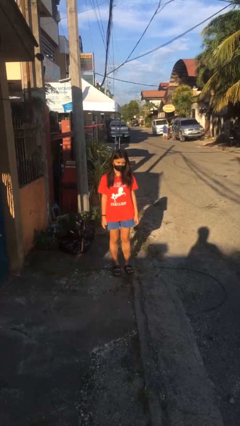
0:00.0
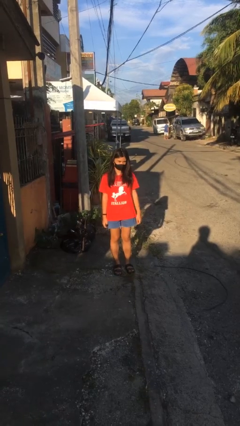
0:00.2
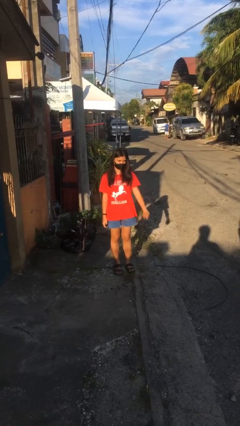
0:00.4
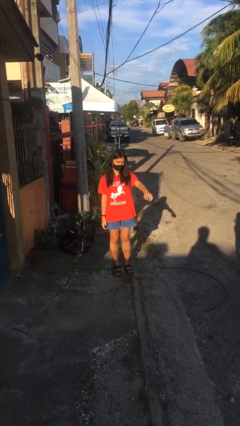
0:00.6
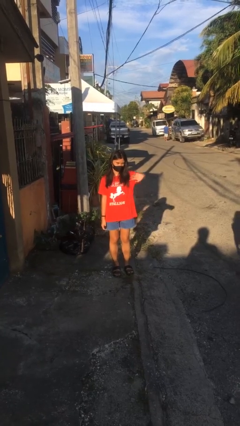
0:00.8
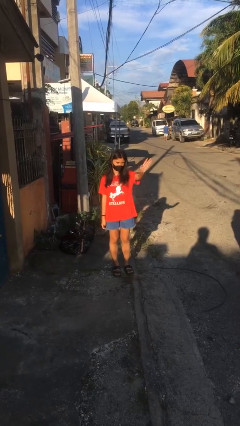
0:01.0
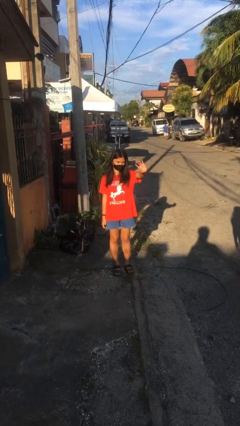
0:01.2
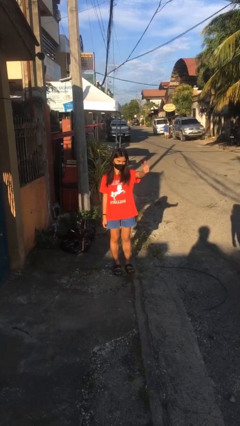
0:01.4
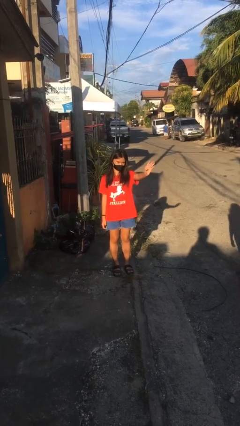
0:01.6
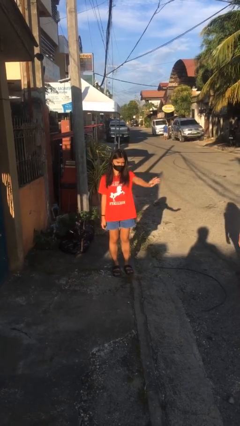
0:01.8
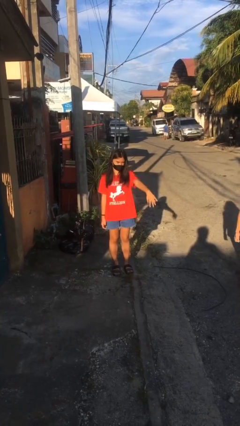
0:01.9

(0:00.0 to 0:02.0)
person waves at person

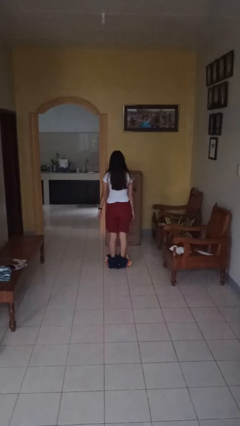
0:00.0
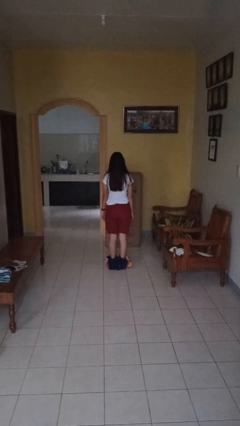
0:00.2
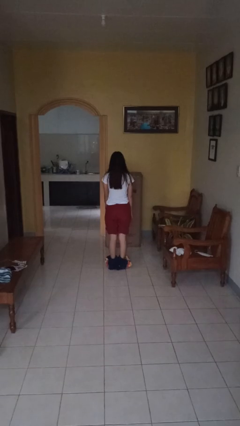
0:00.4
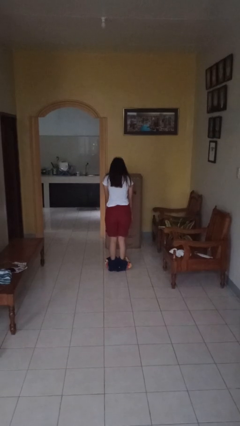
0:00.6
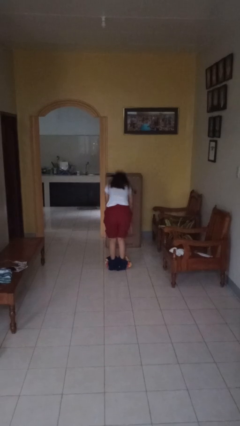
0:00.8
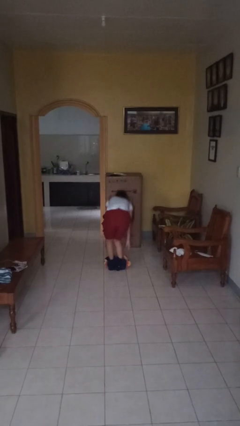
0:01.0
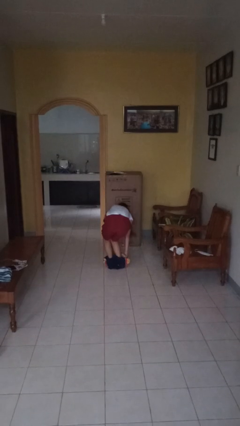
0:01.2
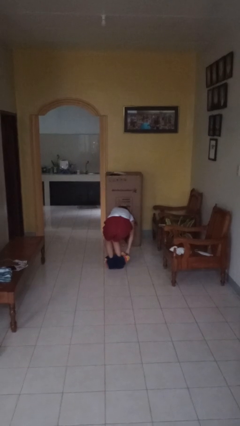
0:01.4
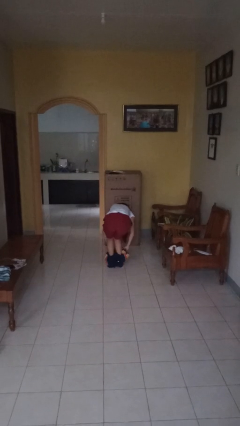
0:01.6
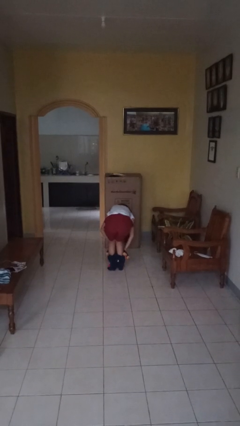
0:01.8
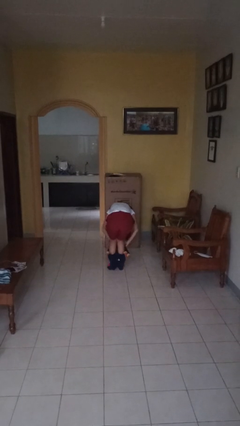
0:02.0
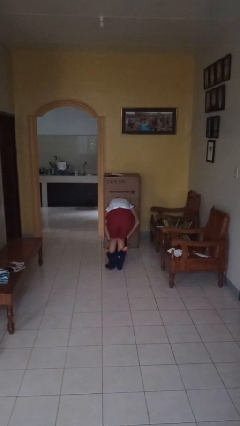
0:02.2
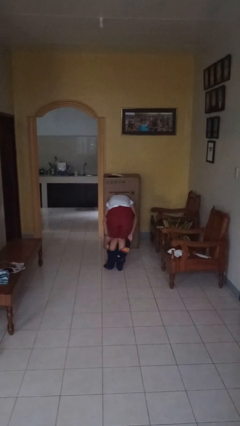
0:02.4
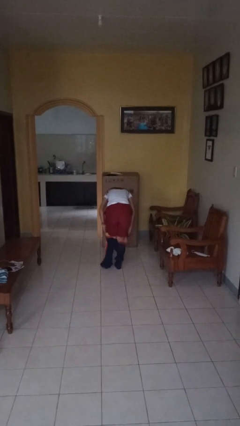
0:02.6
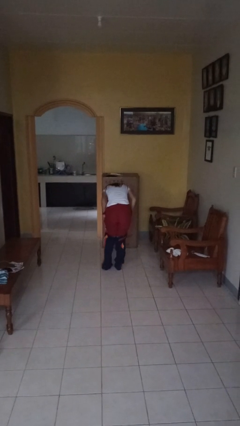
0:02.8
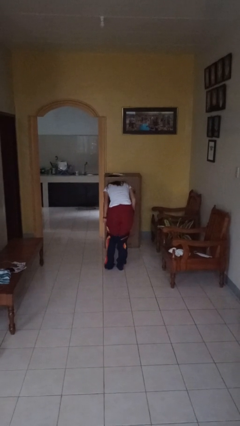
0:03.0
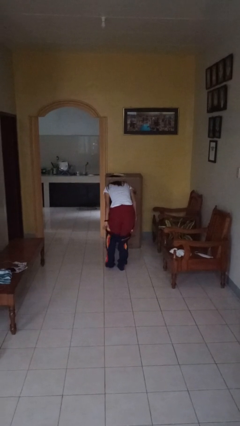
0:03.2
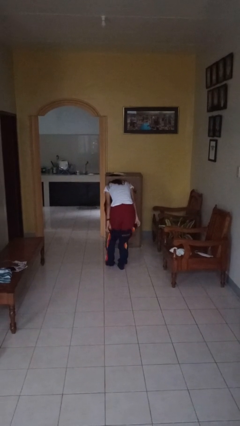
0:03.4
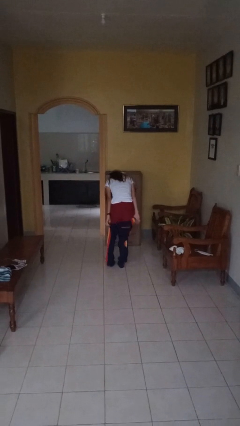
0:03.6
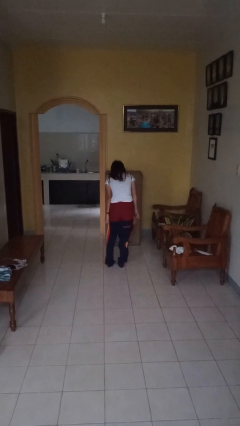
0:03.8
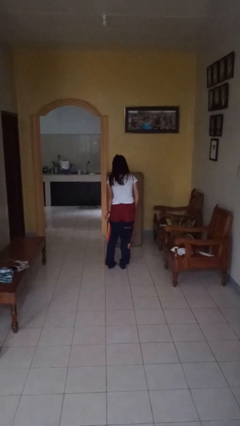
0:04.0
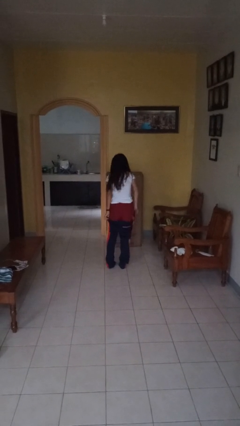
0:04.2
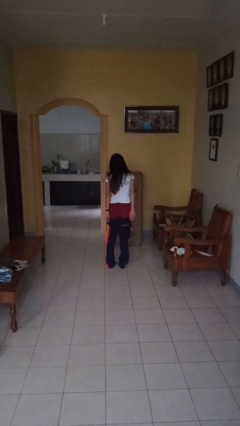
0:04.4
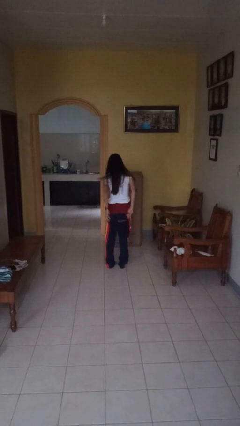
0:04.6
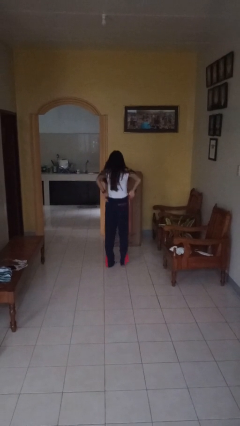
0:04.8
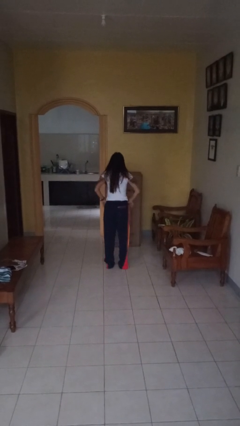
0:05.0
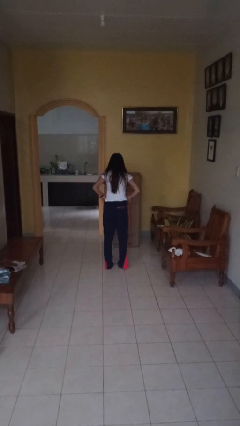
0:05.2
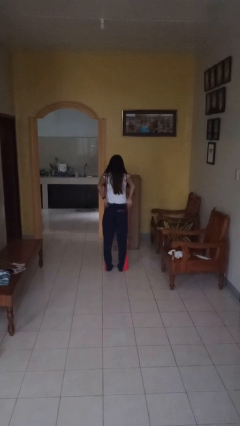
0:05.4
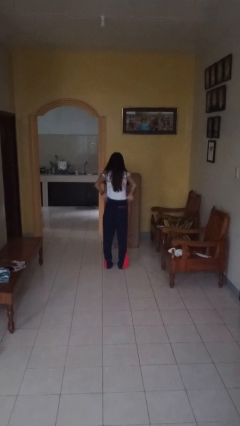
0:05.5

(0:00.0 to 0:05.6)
person puts on pants

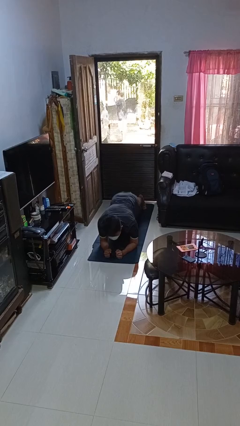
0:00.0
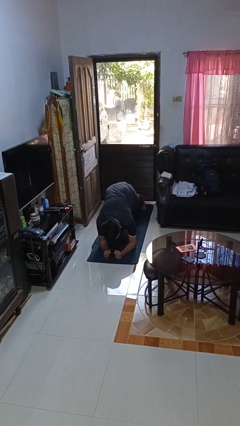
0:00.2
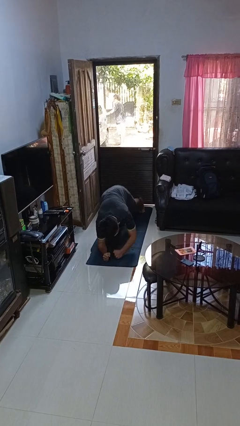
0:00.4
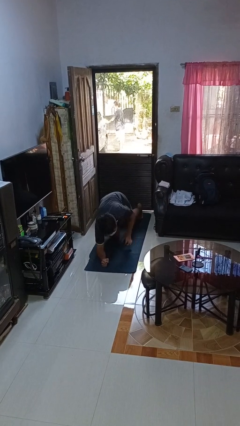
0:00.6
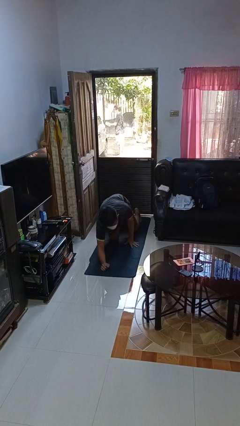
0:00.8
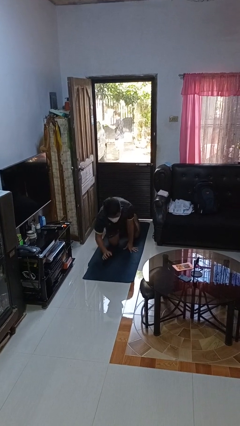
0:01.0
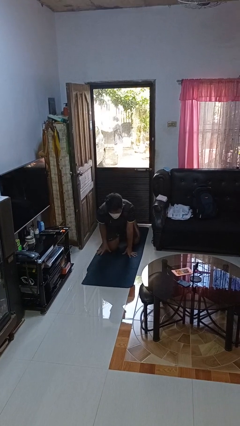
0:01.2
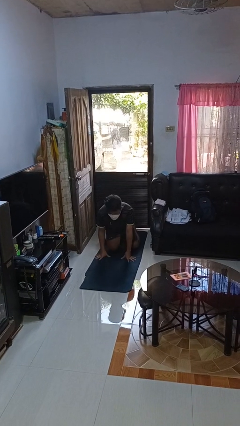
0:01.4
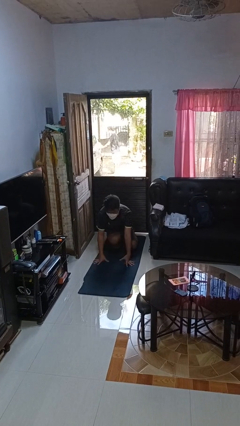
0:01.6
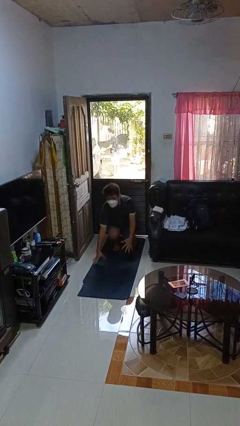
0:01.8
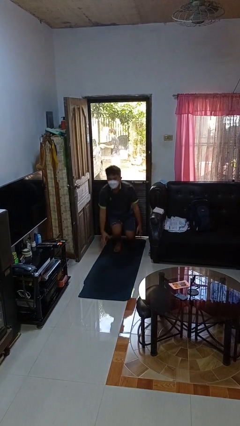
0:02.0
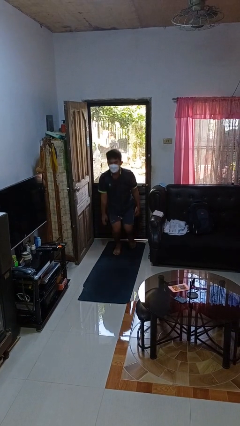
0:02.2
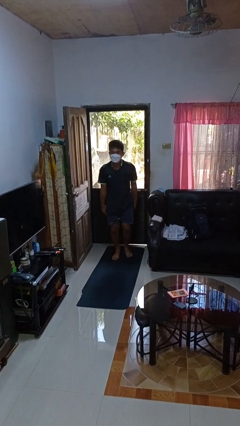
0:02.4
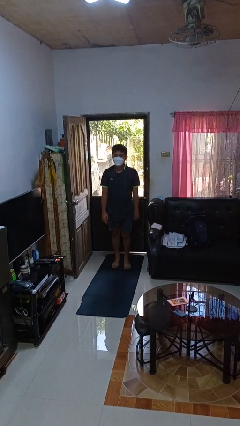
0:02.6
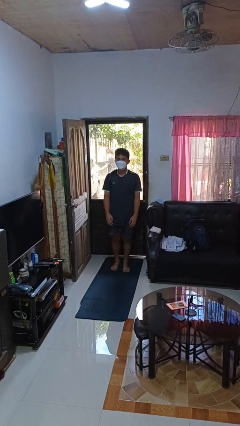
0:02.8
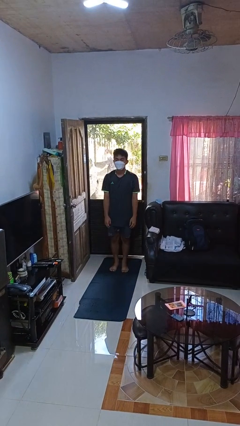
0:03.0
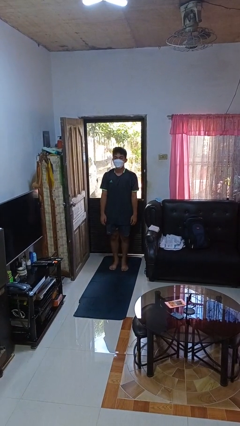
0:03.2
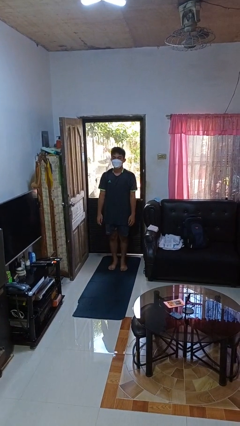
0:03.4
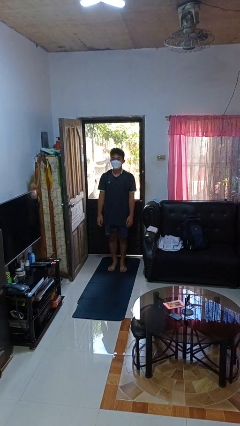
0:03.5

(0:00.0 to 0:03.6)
person stands up from floor

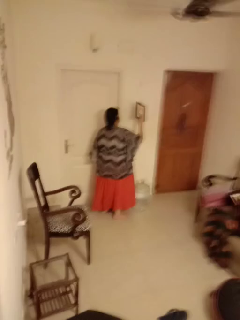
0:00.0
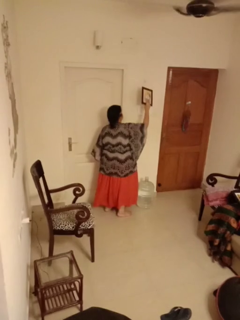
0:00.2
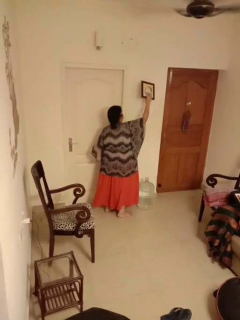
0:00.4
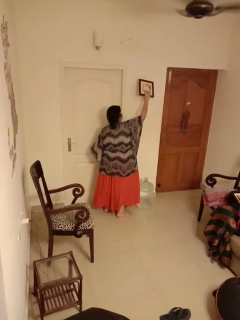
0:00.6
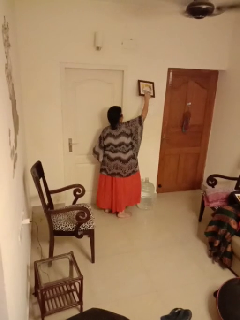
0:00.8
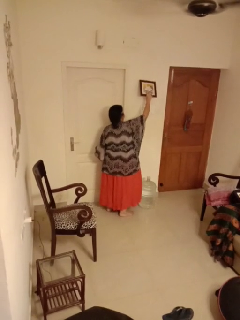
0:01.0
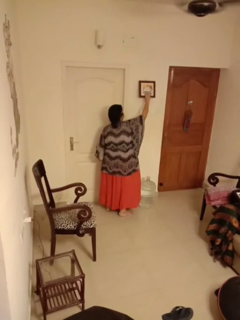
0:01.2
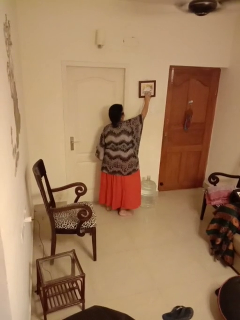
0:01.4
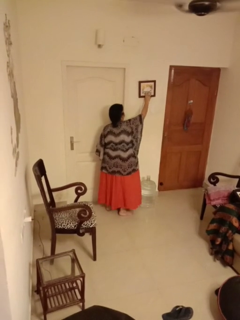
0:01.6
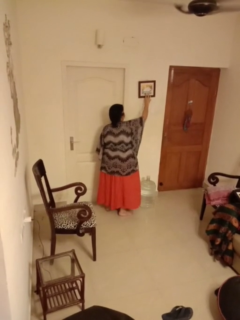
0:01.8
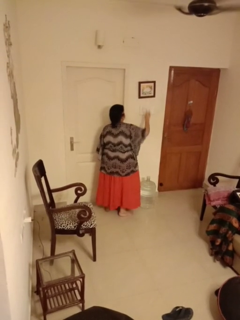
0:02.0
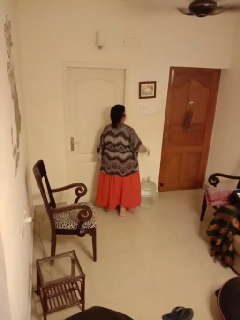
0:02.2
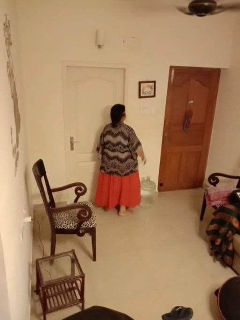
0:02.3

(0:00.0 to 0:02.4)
person puts up picture frame

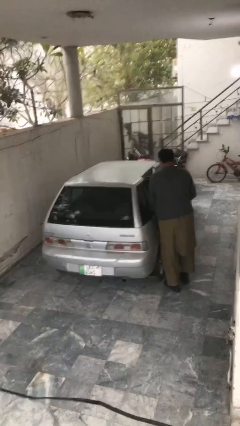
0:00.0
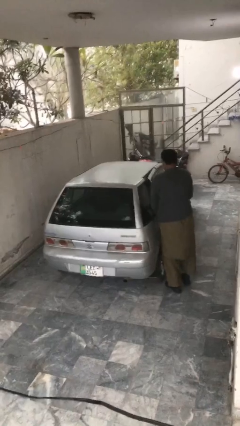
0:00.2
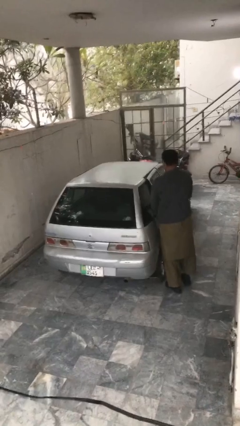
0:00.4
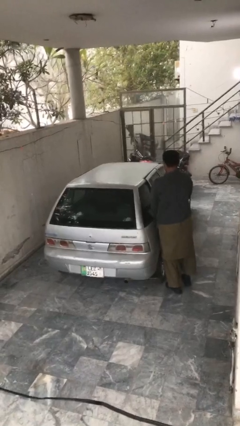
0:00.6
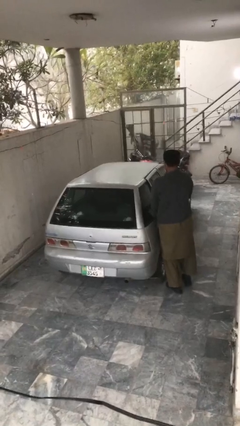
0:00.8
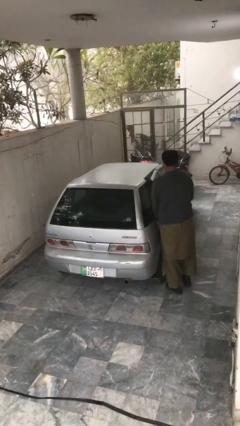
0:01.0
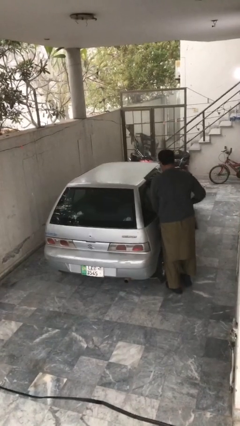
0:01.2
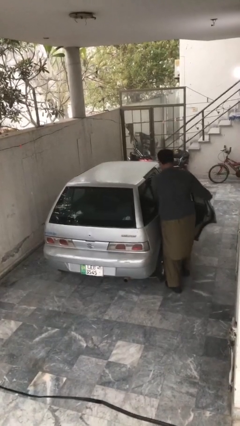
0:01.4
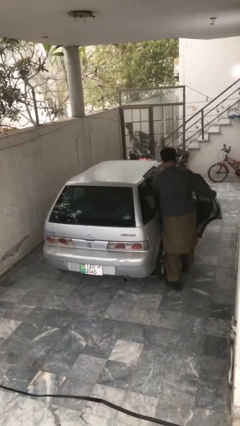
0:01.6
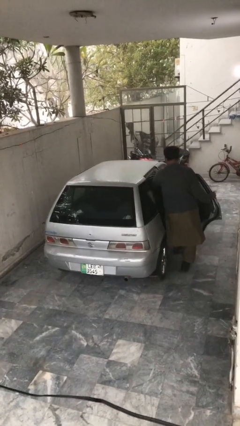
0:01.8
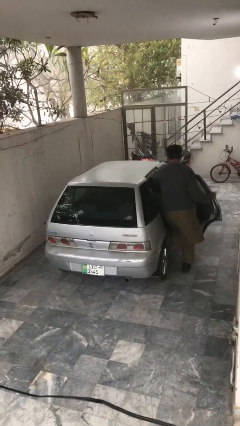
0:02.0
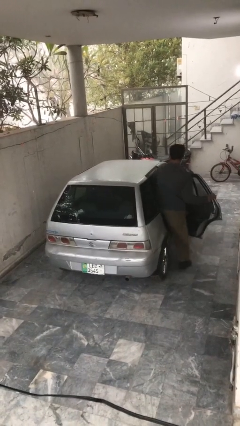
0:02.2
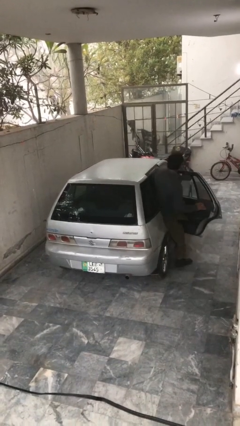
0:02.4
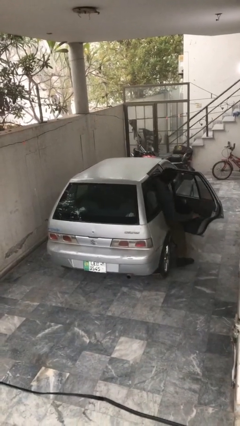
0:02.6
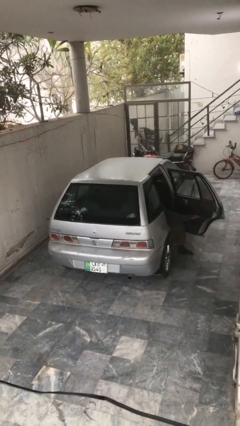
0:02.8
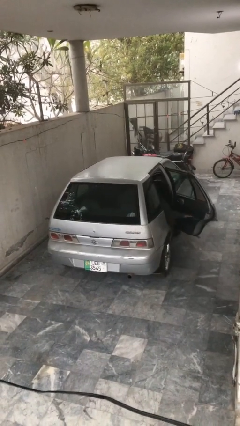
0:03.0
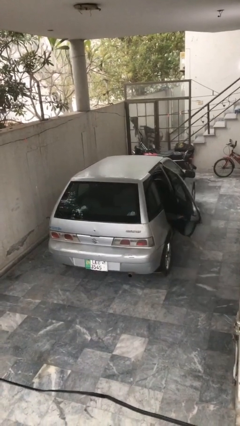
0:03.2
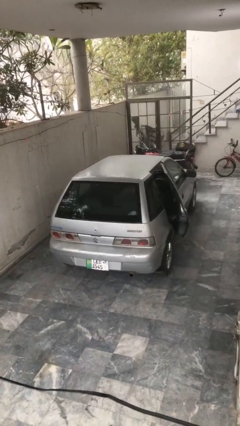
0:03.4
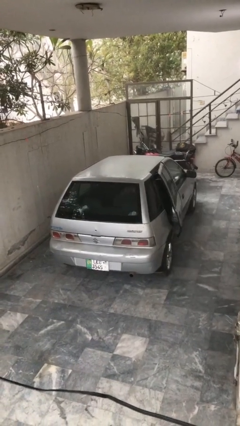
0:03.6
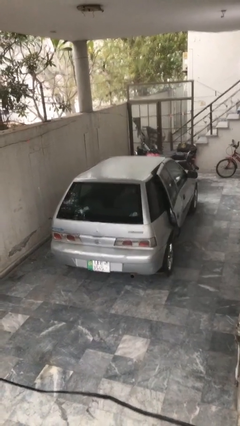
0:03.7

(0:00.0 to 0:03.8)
car picks up person

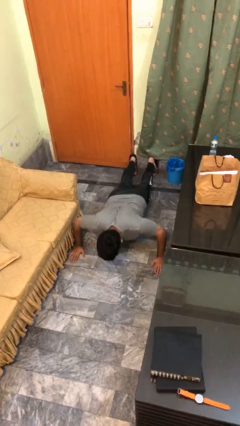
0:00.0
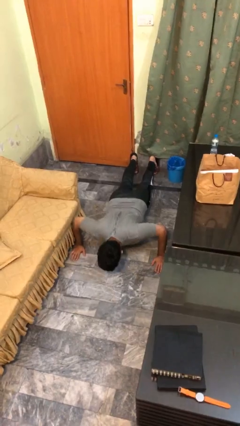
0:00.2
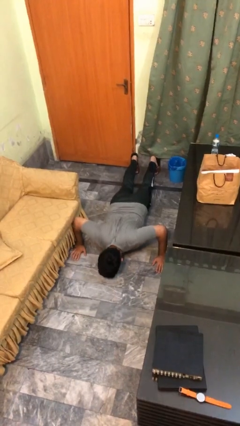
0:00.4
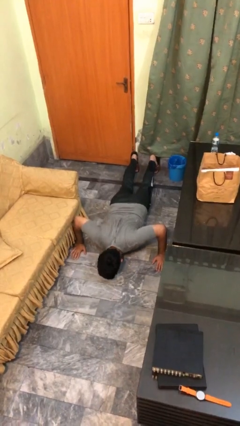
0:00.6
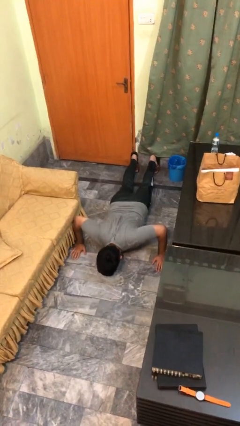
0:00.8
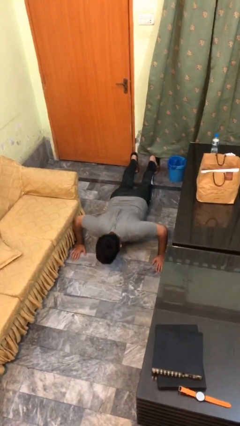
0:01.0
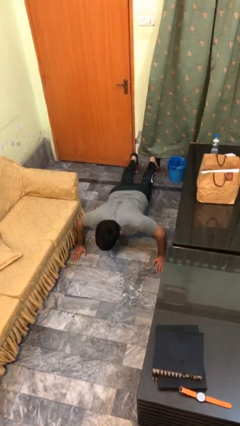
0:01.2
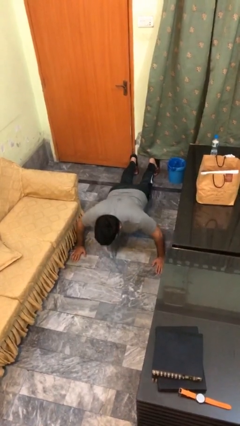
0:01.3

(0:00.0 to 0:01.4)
person exercises with pushup
